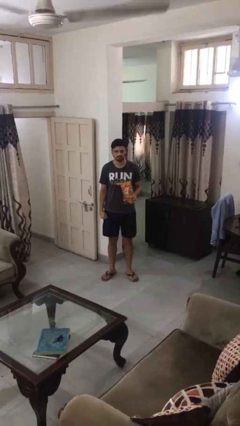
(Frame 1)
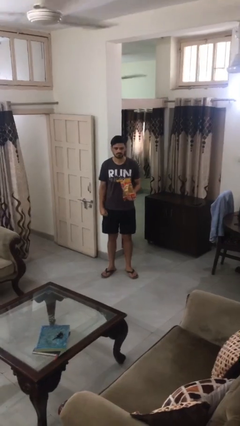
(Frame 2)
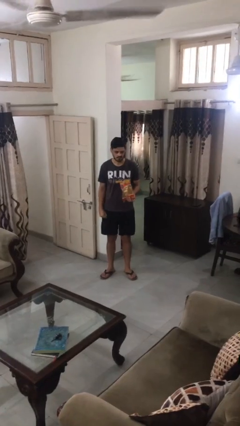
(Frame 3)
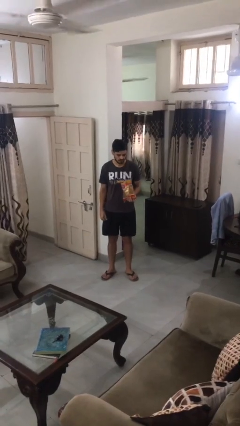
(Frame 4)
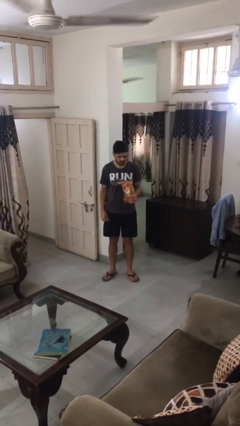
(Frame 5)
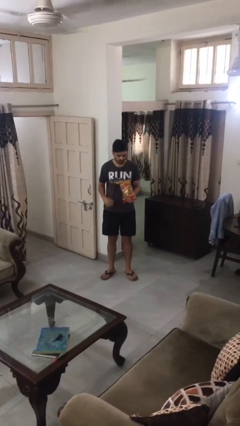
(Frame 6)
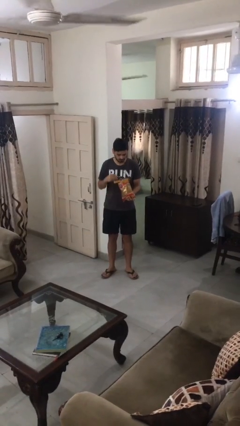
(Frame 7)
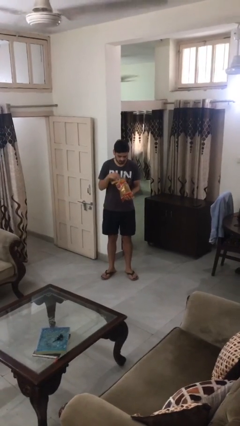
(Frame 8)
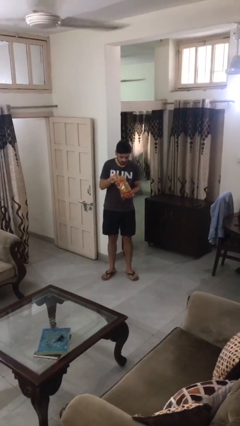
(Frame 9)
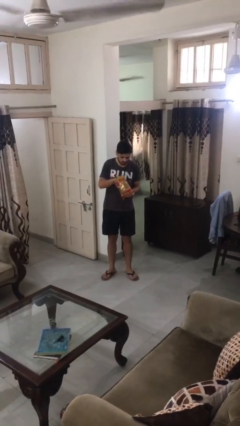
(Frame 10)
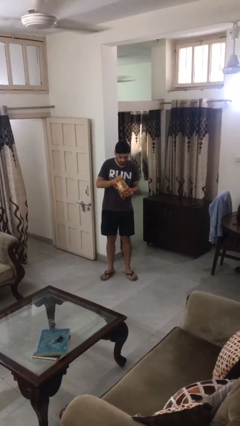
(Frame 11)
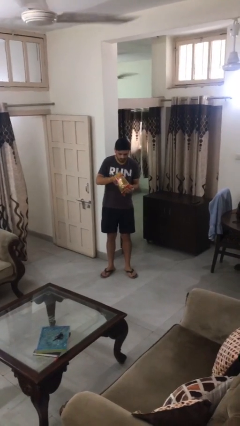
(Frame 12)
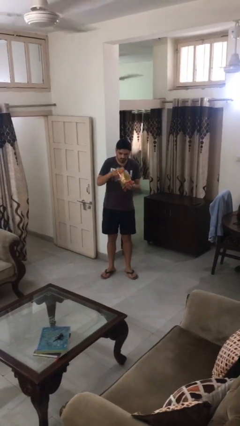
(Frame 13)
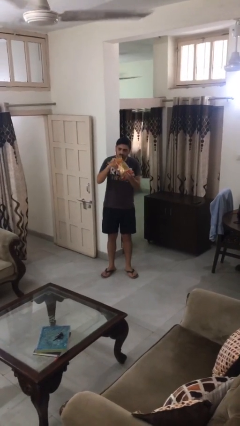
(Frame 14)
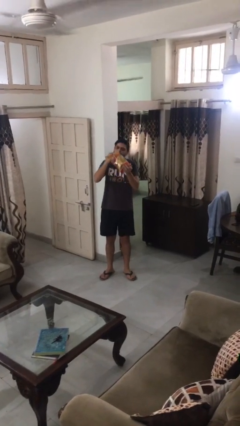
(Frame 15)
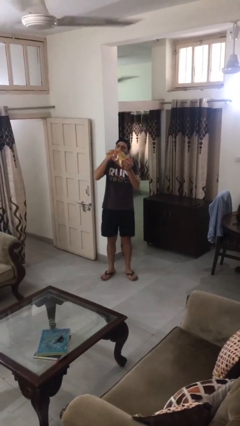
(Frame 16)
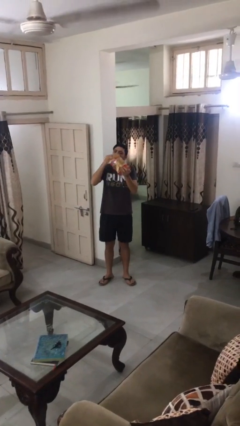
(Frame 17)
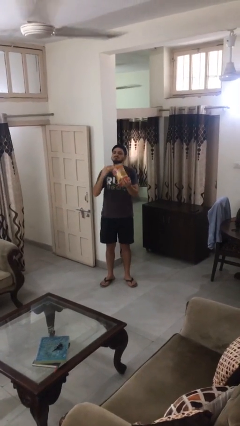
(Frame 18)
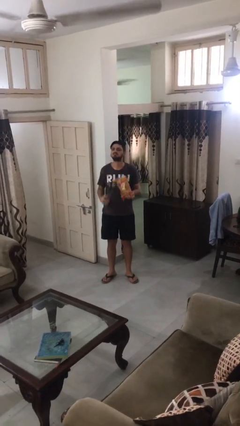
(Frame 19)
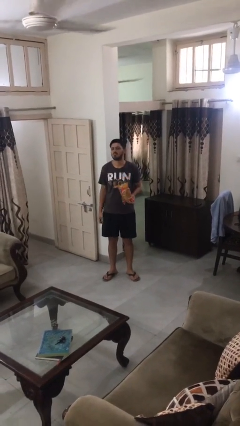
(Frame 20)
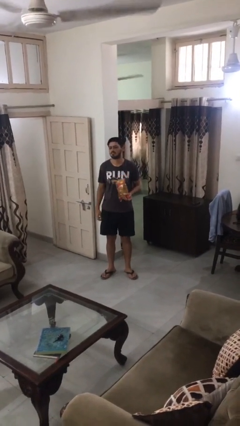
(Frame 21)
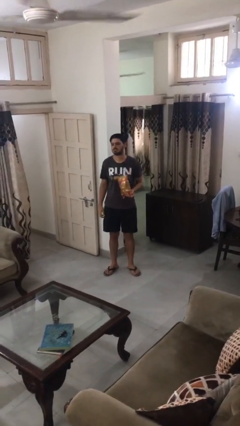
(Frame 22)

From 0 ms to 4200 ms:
person eats snack from bag

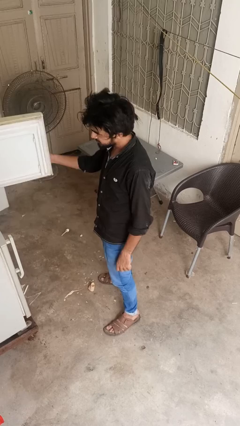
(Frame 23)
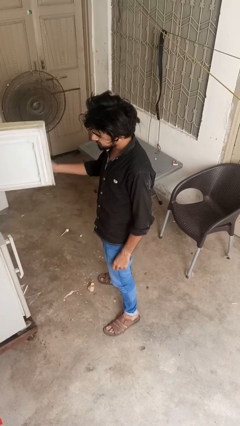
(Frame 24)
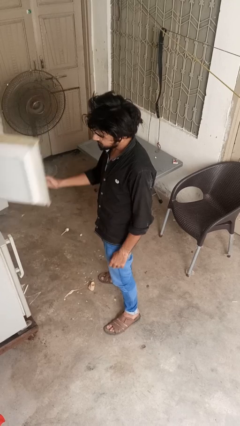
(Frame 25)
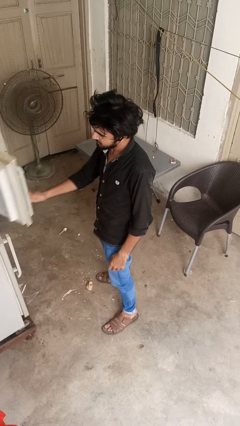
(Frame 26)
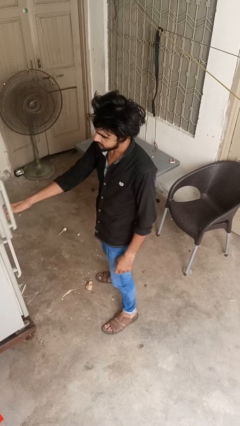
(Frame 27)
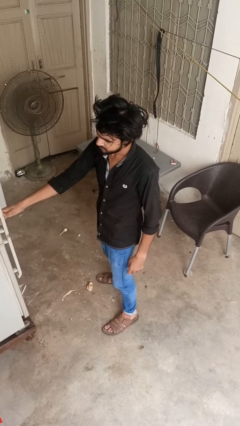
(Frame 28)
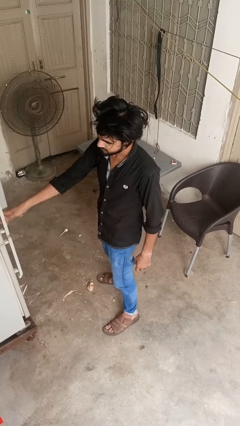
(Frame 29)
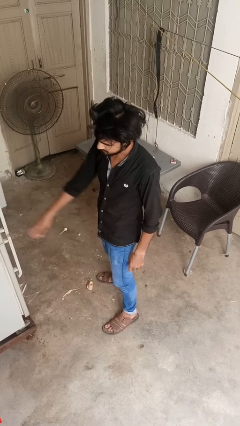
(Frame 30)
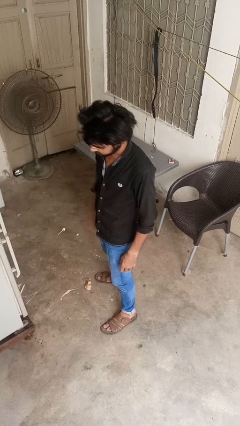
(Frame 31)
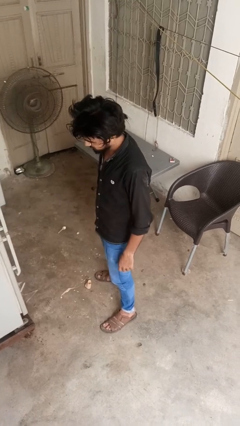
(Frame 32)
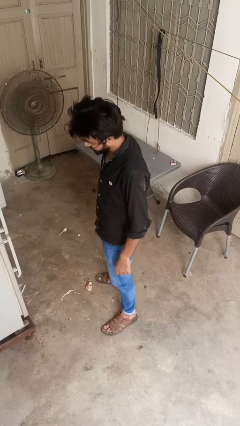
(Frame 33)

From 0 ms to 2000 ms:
person closes refrigerator

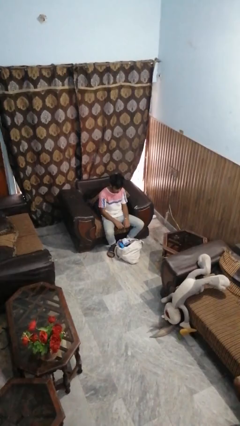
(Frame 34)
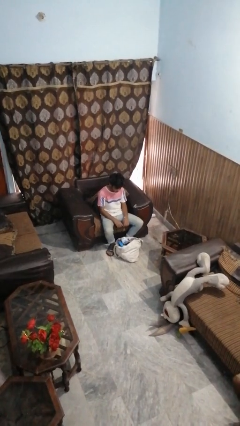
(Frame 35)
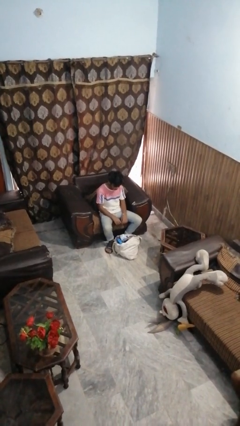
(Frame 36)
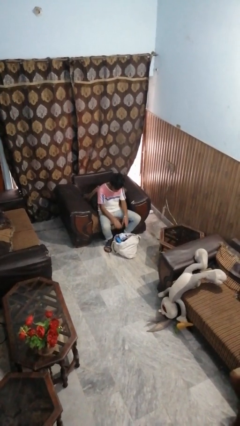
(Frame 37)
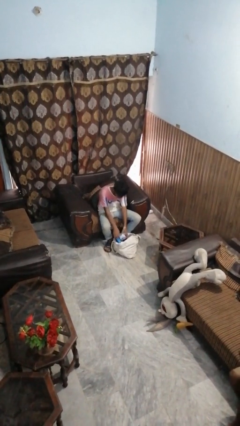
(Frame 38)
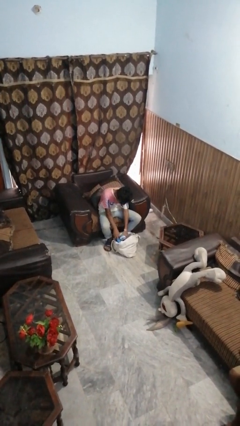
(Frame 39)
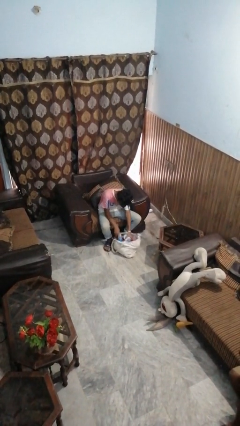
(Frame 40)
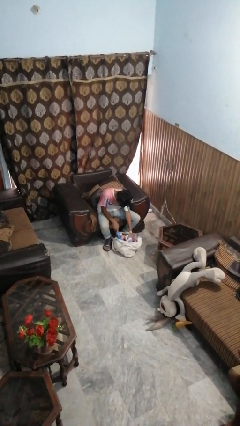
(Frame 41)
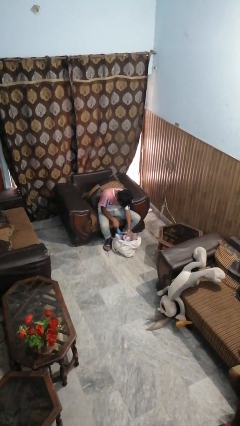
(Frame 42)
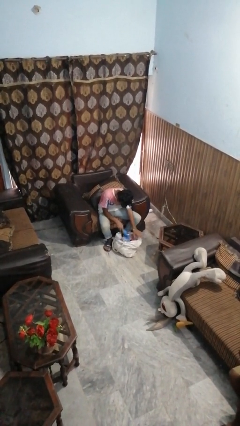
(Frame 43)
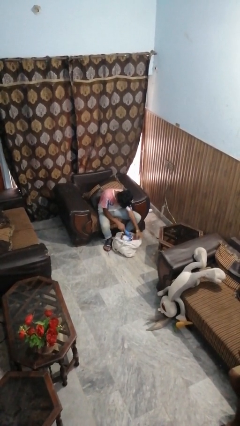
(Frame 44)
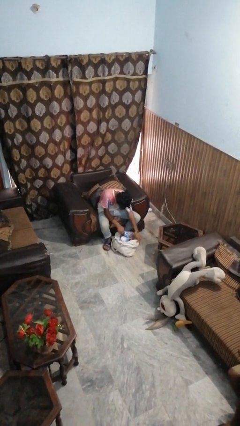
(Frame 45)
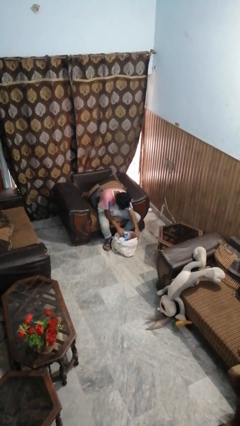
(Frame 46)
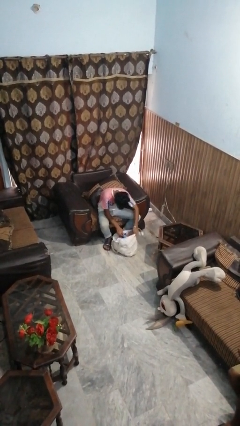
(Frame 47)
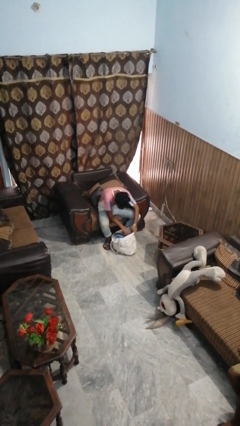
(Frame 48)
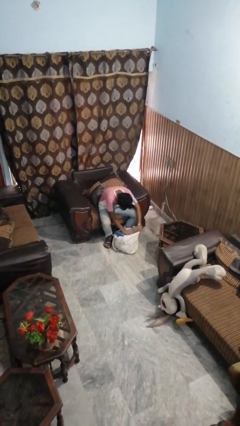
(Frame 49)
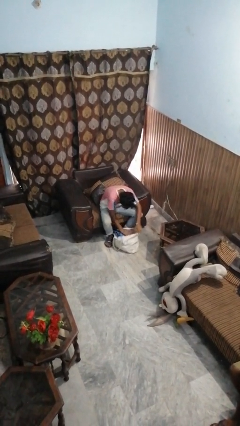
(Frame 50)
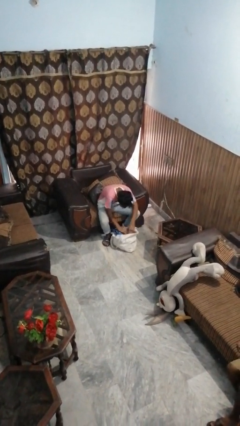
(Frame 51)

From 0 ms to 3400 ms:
person searches in bag

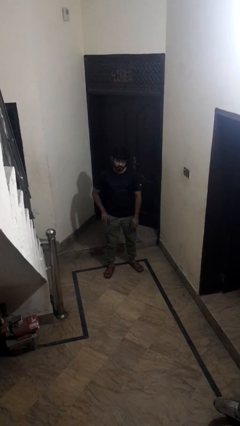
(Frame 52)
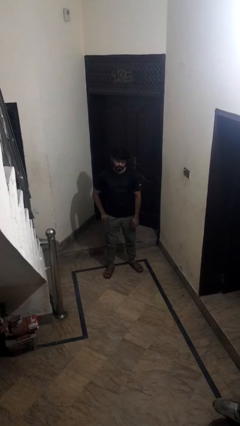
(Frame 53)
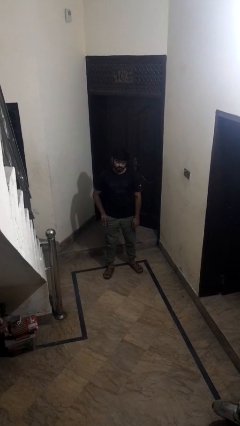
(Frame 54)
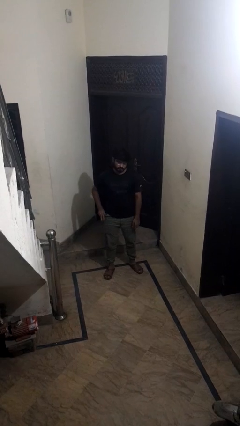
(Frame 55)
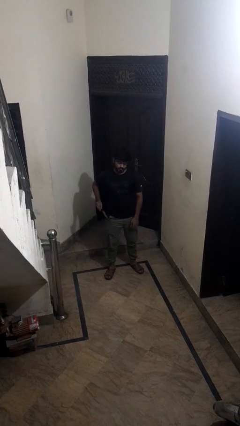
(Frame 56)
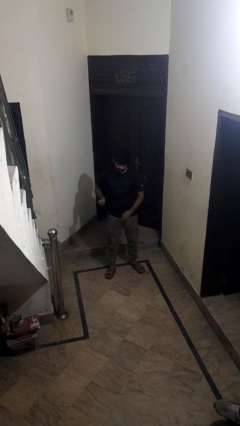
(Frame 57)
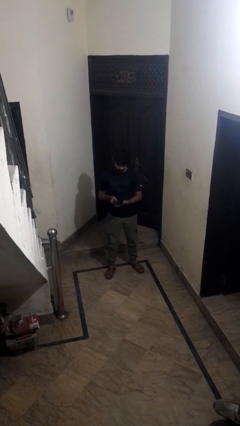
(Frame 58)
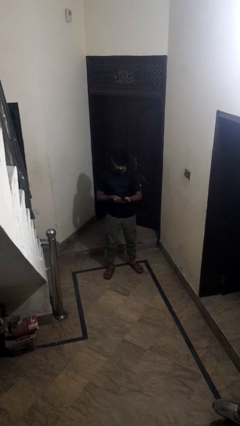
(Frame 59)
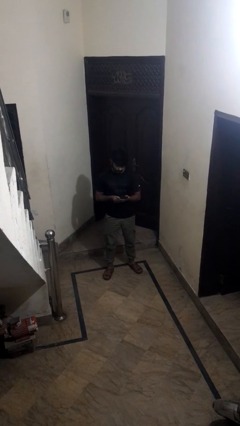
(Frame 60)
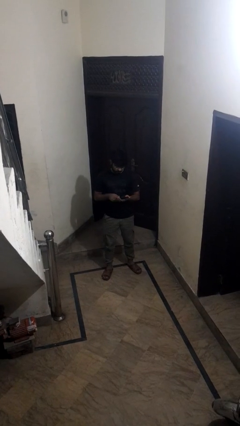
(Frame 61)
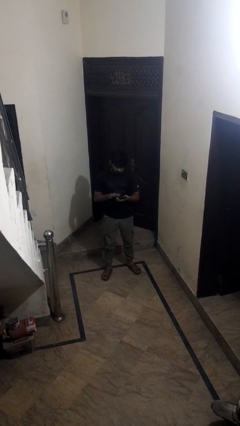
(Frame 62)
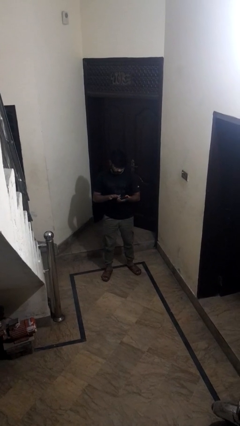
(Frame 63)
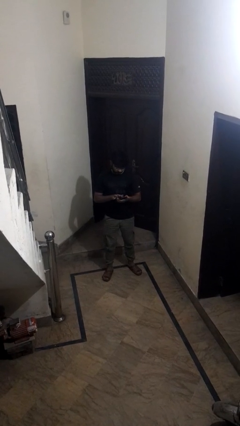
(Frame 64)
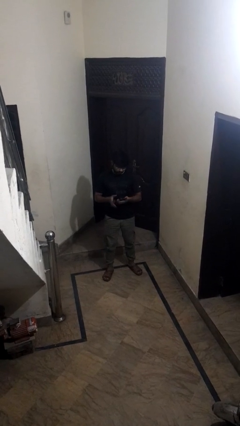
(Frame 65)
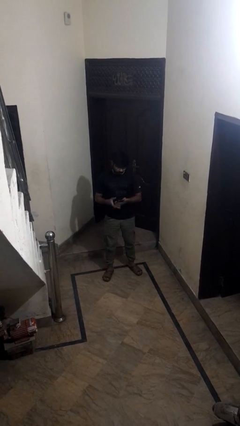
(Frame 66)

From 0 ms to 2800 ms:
person takes phone from pocket

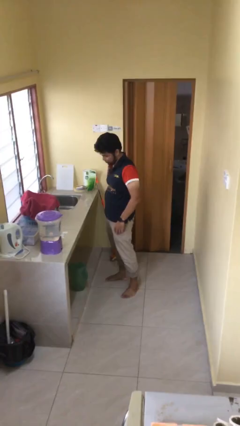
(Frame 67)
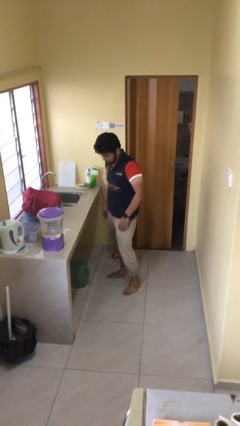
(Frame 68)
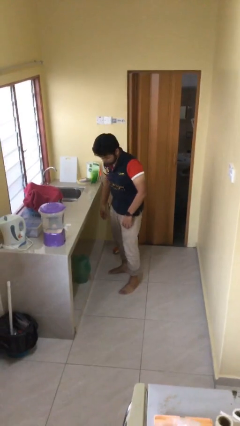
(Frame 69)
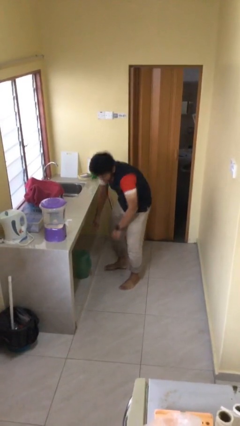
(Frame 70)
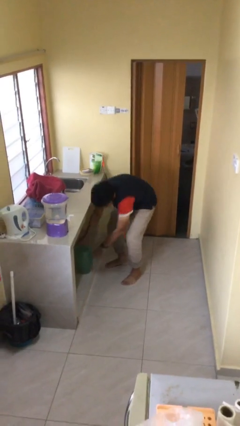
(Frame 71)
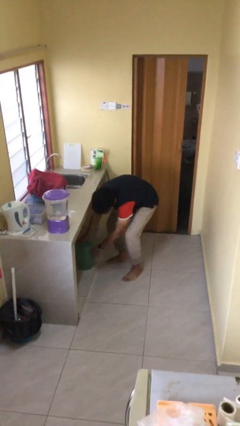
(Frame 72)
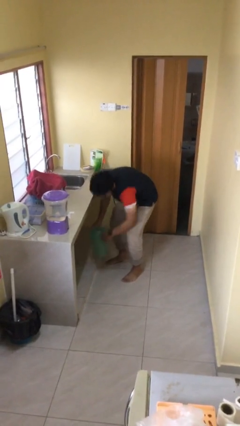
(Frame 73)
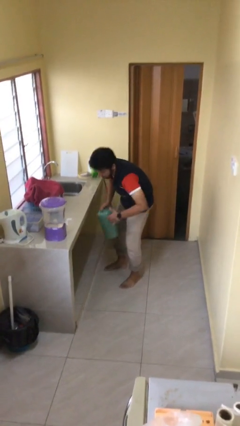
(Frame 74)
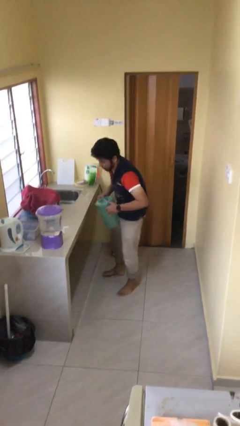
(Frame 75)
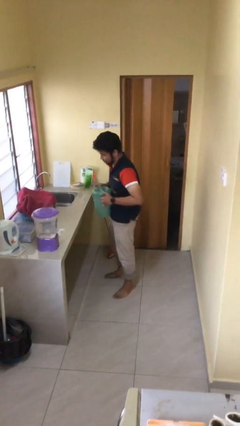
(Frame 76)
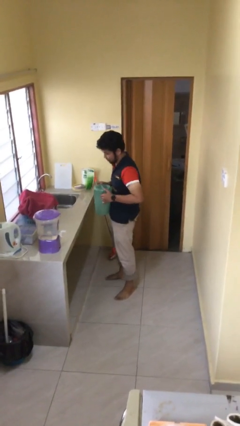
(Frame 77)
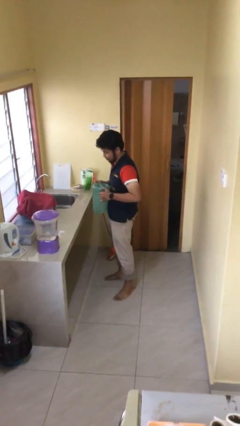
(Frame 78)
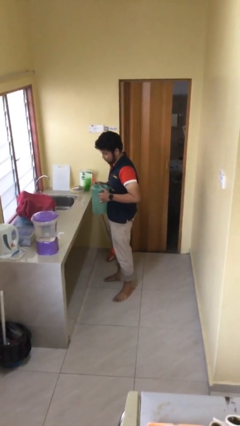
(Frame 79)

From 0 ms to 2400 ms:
person picks up object from cabinet

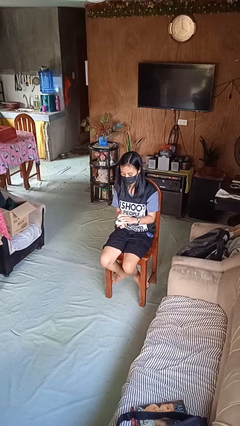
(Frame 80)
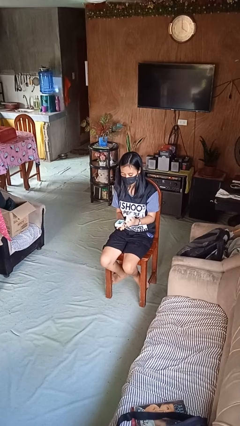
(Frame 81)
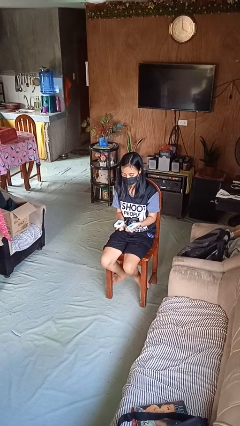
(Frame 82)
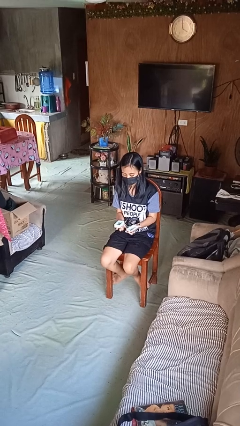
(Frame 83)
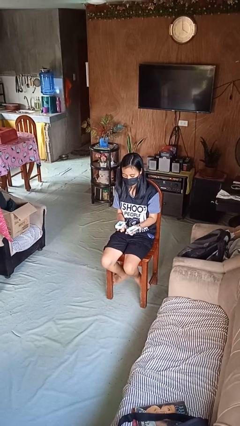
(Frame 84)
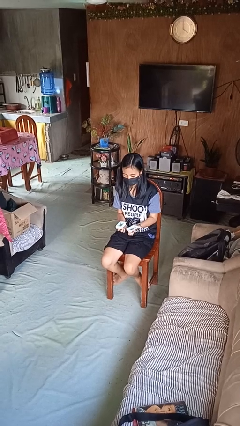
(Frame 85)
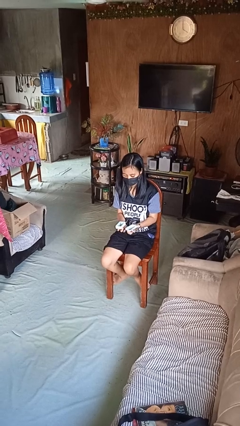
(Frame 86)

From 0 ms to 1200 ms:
person opens jewelry box

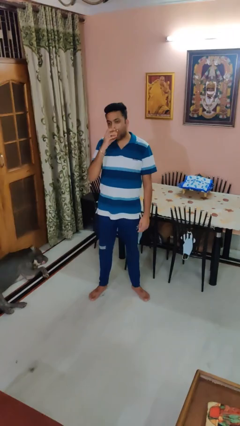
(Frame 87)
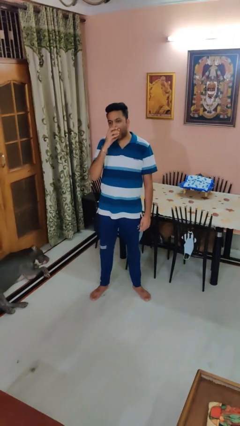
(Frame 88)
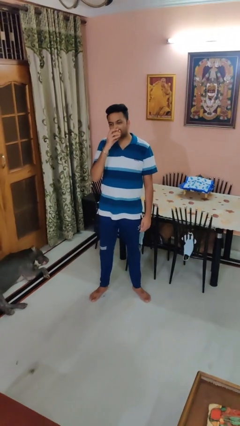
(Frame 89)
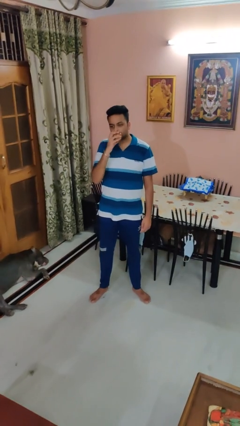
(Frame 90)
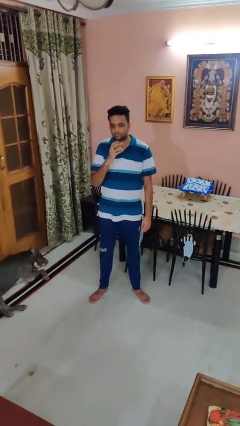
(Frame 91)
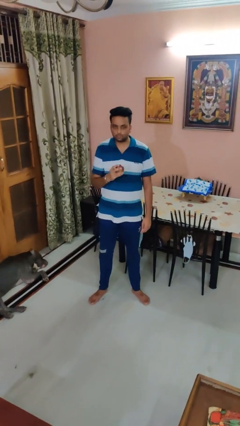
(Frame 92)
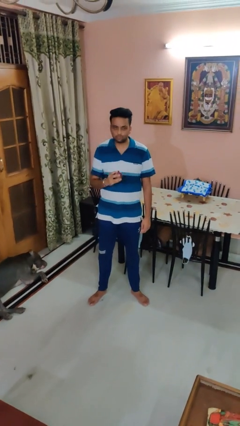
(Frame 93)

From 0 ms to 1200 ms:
person eats apple
